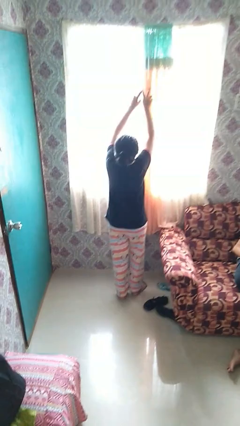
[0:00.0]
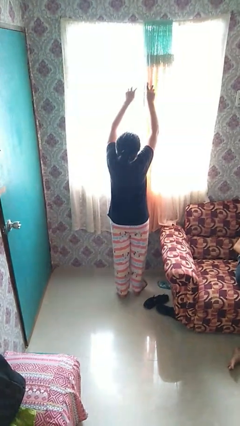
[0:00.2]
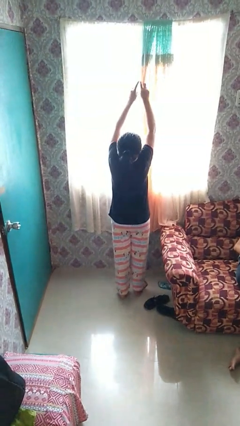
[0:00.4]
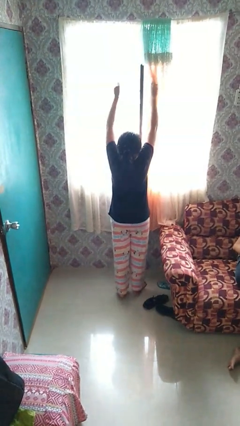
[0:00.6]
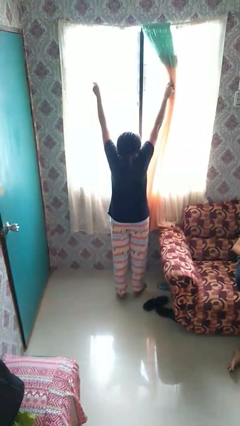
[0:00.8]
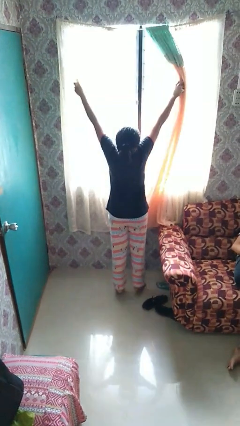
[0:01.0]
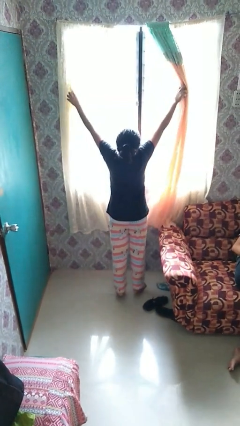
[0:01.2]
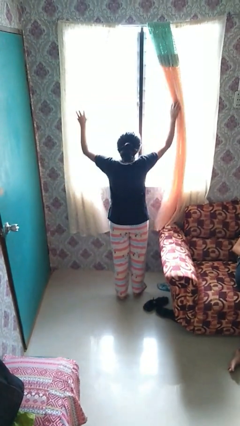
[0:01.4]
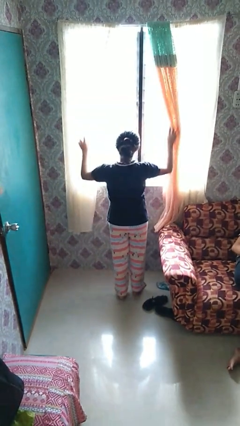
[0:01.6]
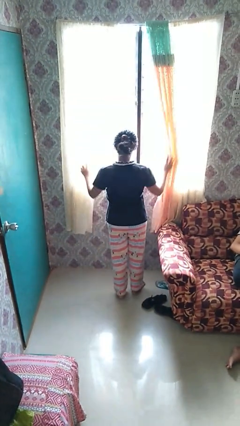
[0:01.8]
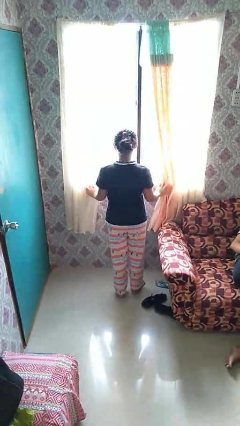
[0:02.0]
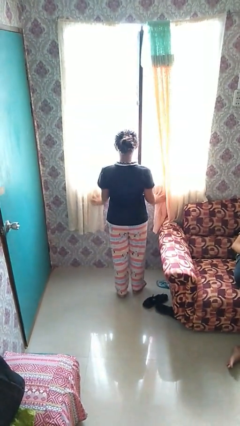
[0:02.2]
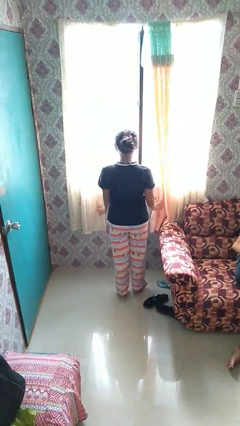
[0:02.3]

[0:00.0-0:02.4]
person opens curtains

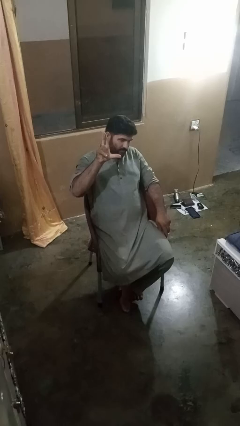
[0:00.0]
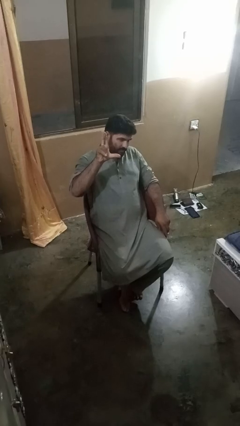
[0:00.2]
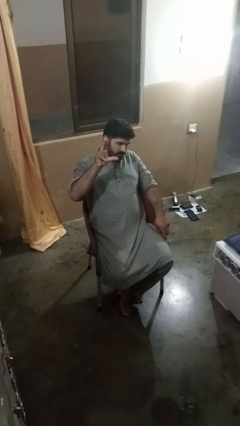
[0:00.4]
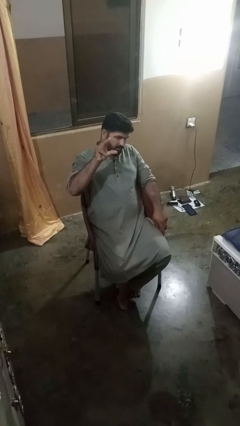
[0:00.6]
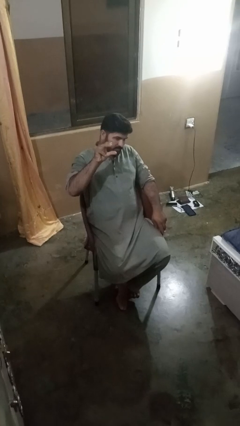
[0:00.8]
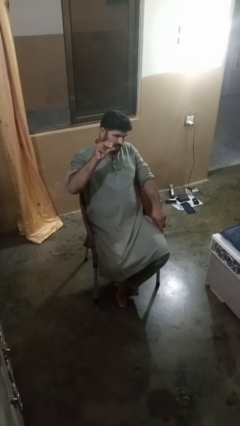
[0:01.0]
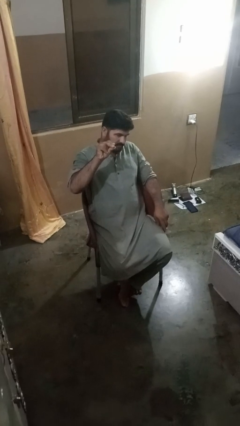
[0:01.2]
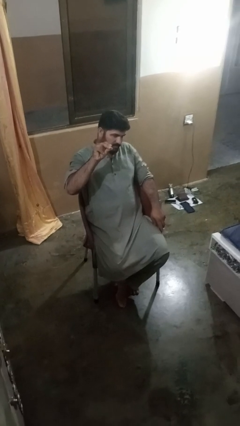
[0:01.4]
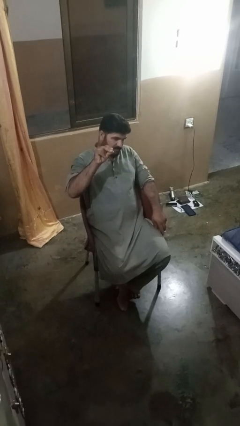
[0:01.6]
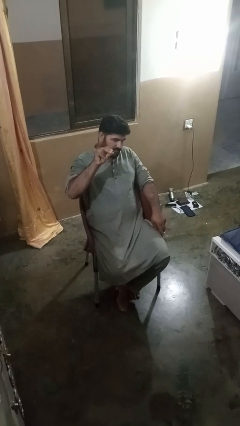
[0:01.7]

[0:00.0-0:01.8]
person gestures zoom in

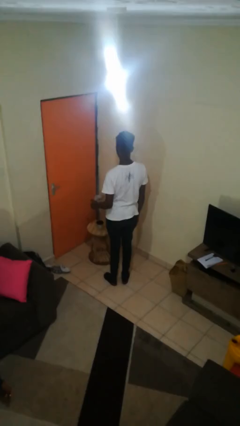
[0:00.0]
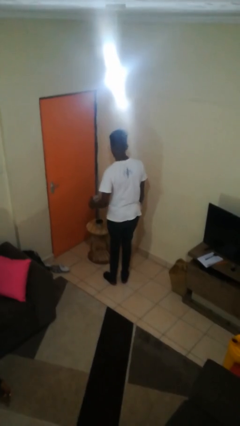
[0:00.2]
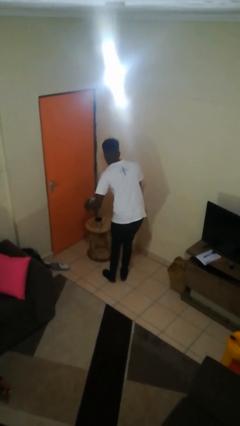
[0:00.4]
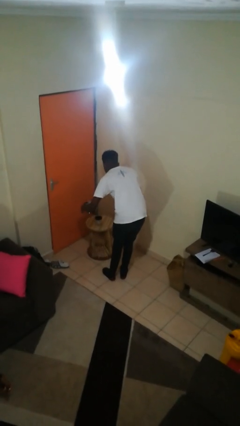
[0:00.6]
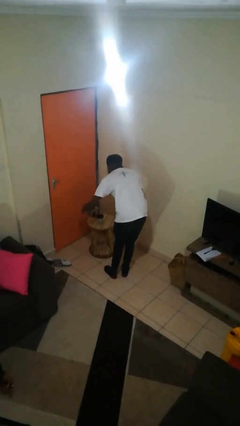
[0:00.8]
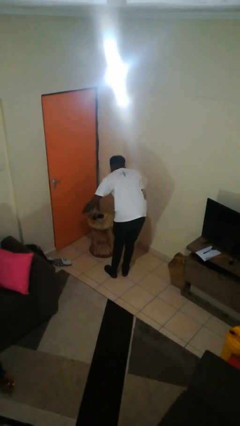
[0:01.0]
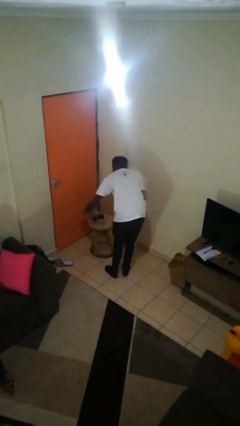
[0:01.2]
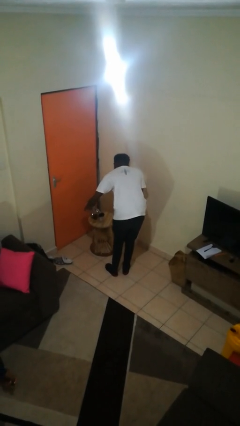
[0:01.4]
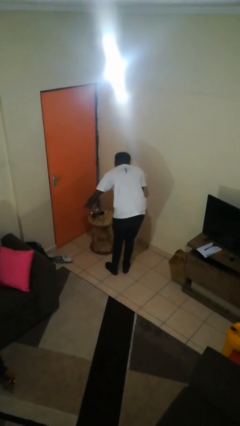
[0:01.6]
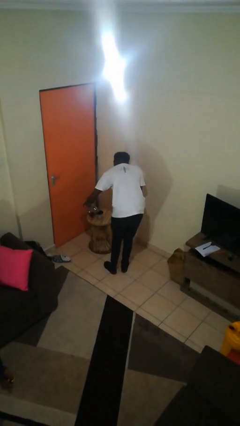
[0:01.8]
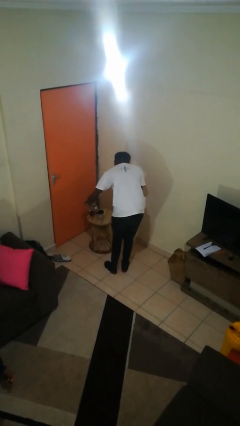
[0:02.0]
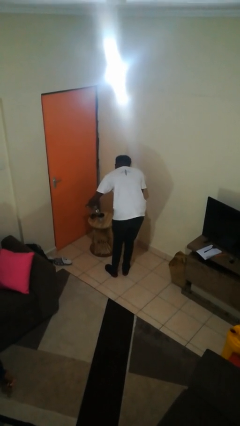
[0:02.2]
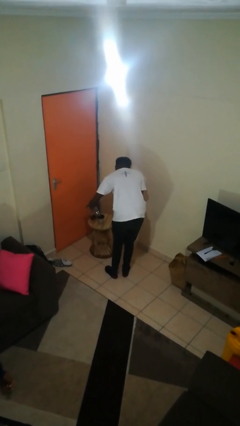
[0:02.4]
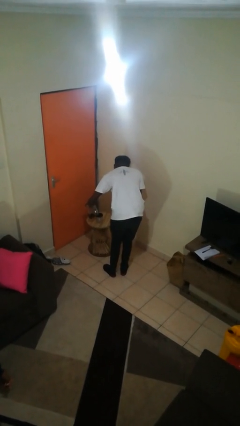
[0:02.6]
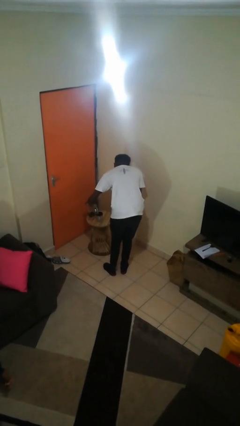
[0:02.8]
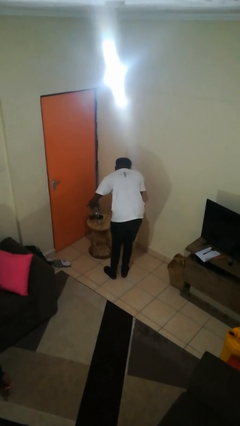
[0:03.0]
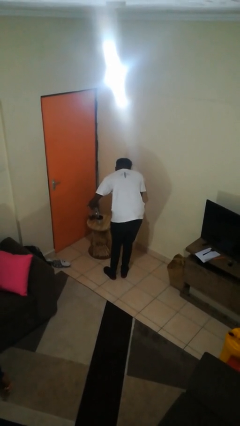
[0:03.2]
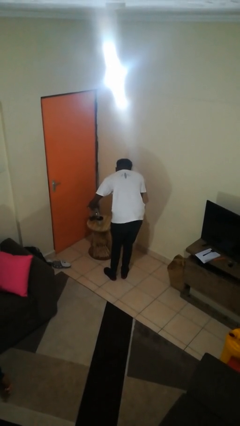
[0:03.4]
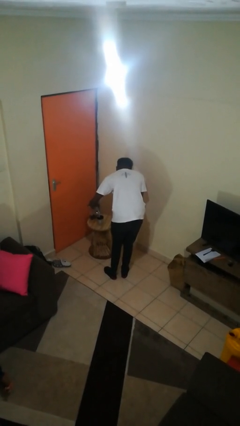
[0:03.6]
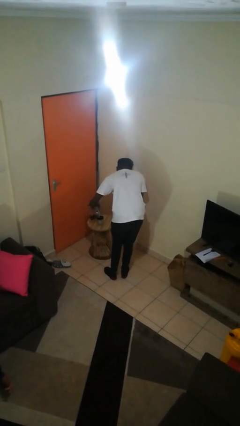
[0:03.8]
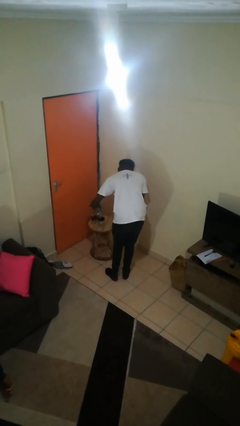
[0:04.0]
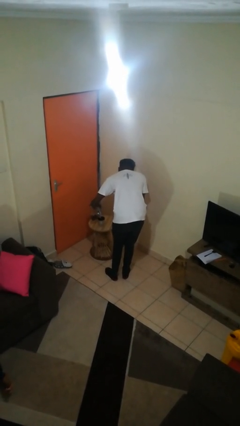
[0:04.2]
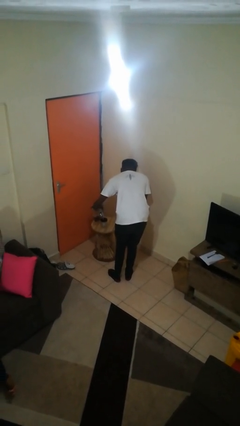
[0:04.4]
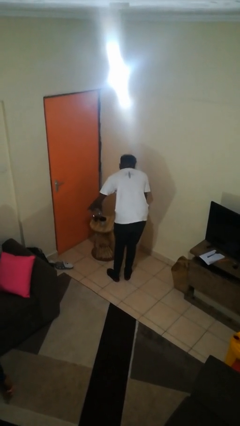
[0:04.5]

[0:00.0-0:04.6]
person pours coffee into mug

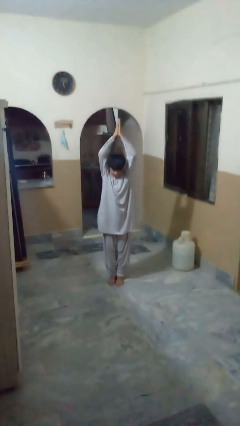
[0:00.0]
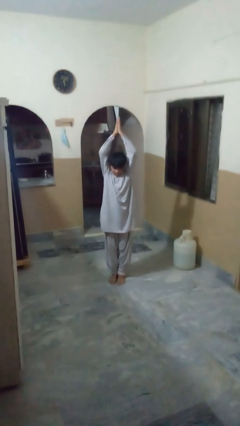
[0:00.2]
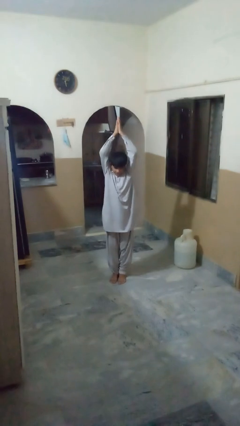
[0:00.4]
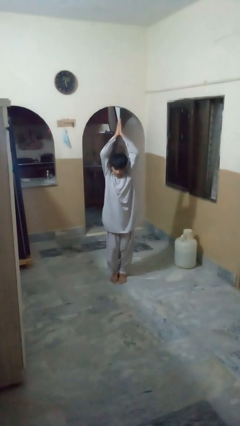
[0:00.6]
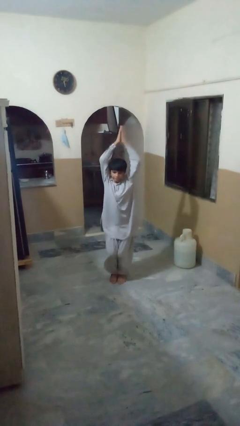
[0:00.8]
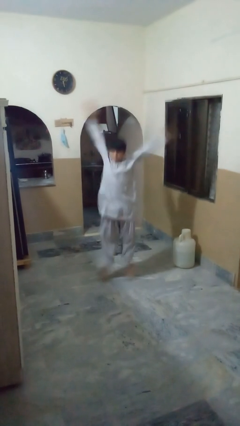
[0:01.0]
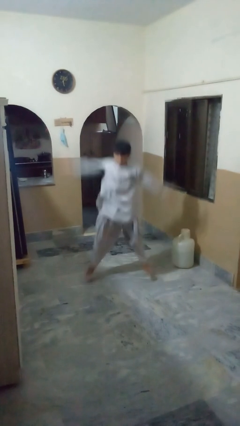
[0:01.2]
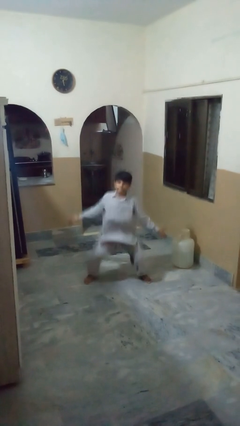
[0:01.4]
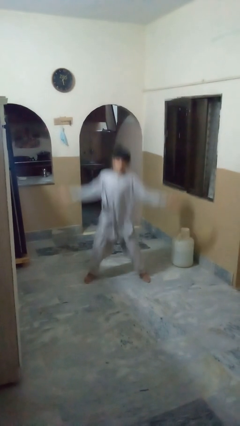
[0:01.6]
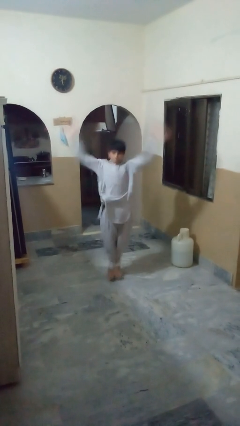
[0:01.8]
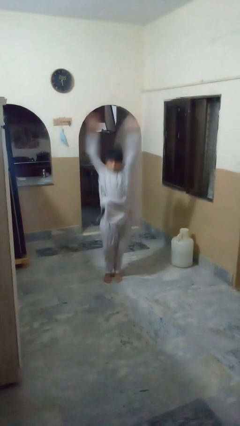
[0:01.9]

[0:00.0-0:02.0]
person exercises with jumping jacks

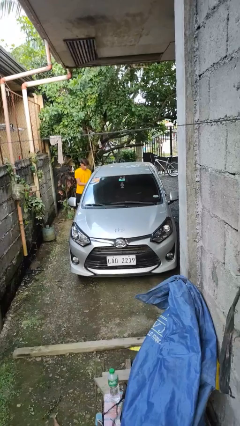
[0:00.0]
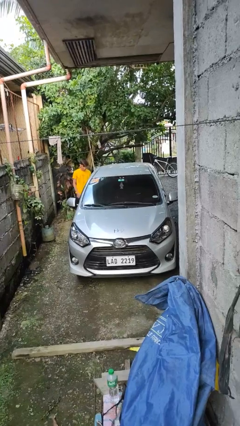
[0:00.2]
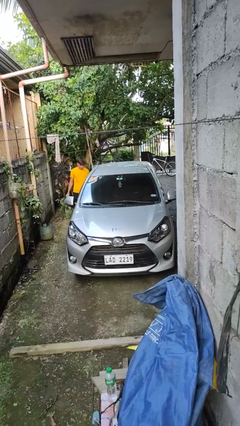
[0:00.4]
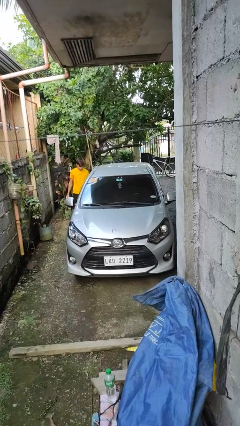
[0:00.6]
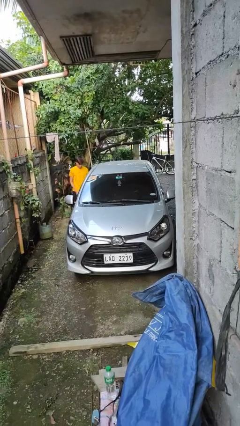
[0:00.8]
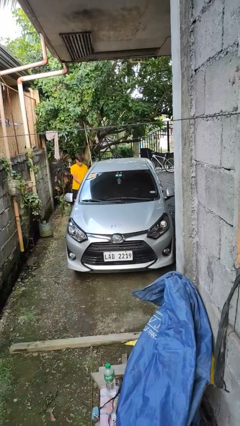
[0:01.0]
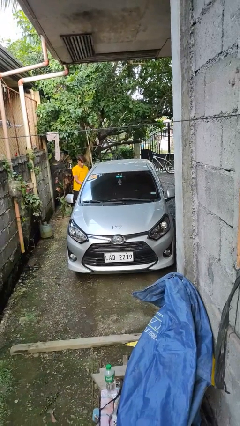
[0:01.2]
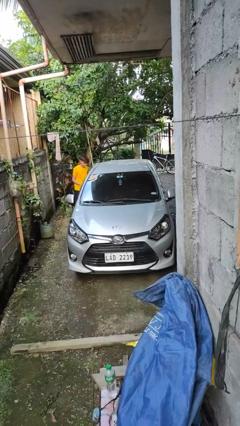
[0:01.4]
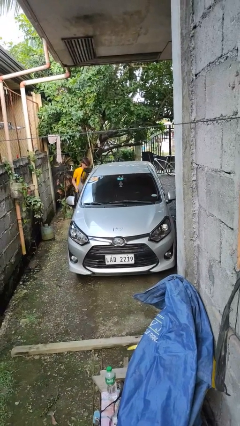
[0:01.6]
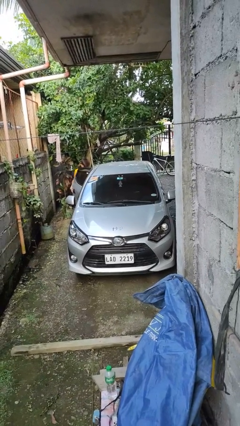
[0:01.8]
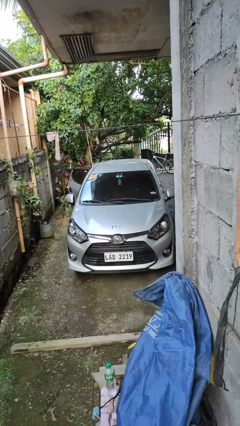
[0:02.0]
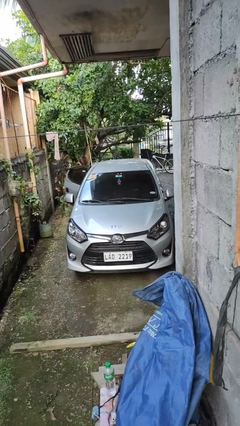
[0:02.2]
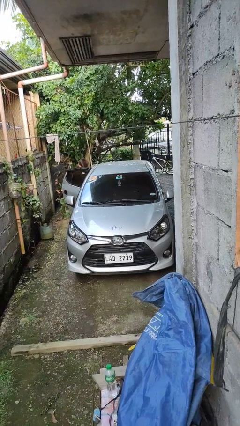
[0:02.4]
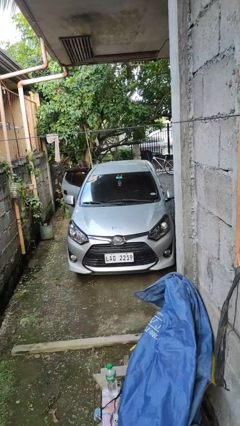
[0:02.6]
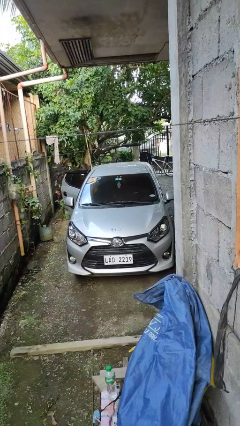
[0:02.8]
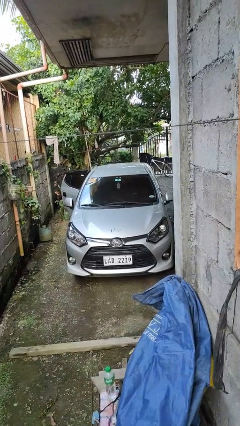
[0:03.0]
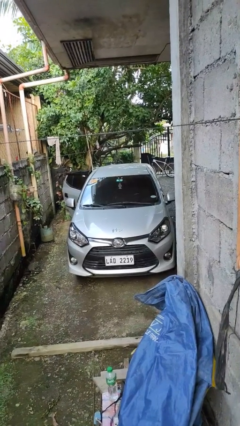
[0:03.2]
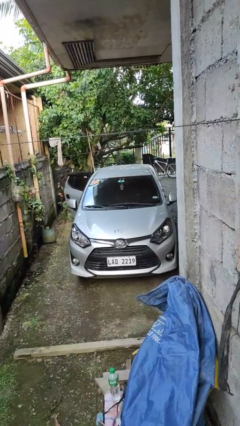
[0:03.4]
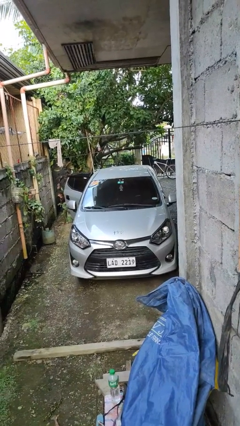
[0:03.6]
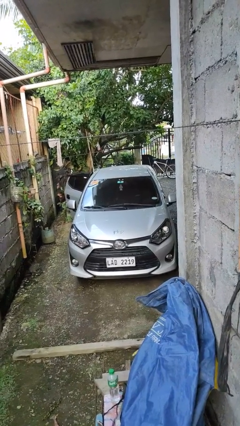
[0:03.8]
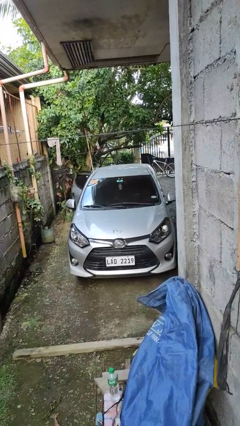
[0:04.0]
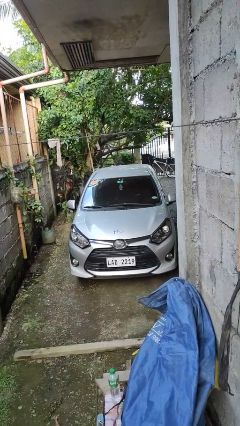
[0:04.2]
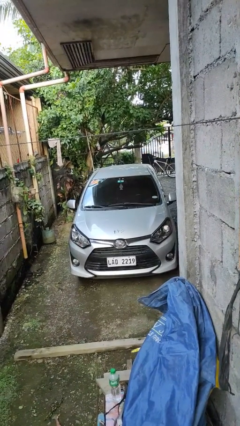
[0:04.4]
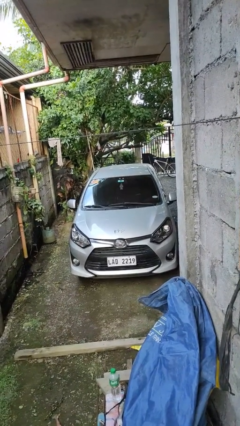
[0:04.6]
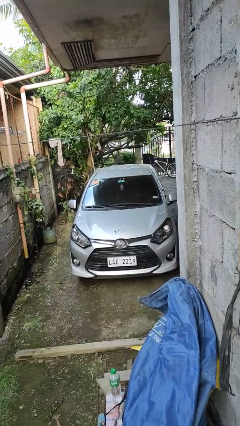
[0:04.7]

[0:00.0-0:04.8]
car picks up person

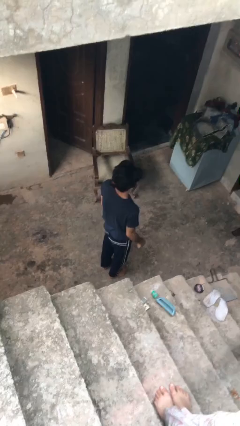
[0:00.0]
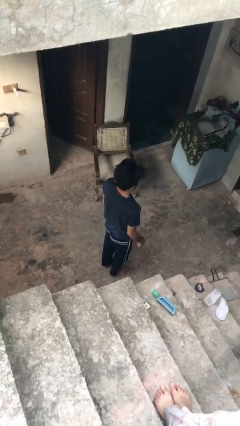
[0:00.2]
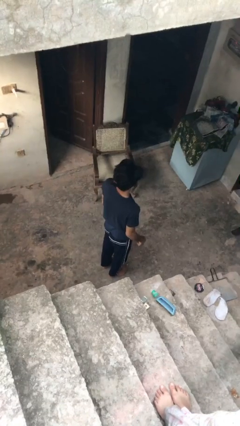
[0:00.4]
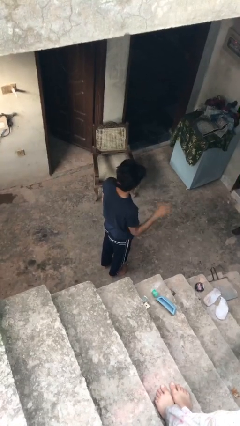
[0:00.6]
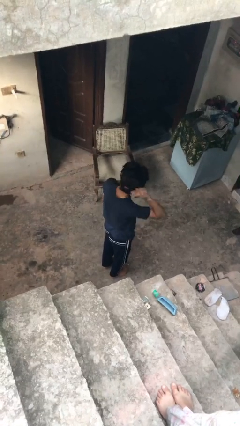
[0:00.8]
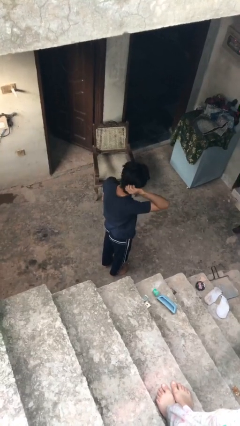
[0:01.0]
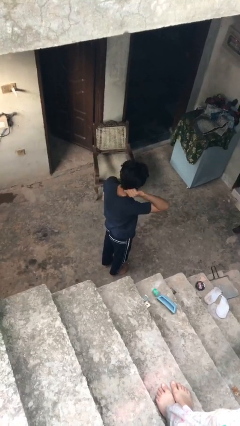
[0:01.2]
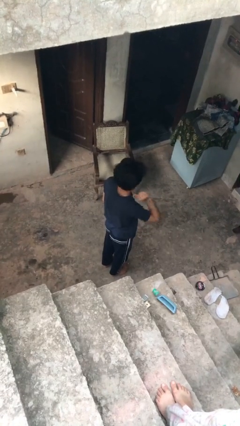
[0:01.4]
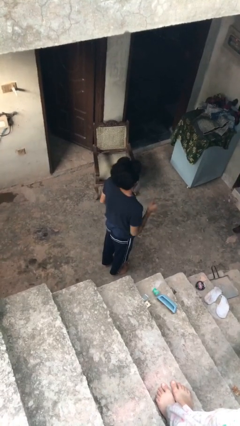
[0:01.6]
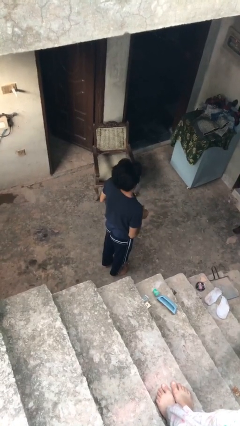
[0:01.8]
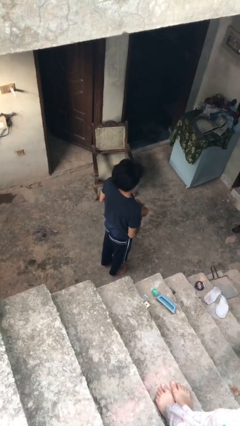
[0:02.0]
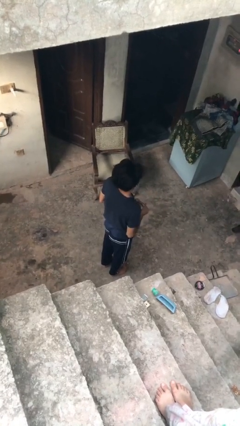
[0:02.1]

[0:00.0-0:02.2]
person takes off hairtie
